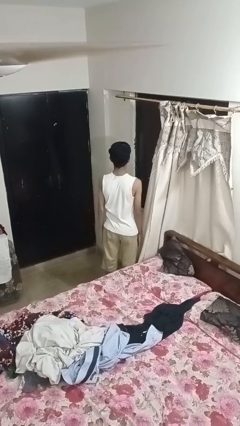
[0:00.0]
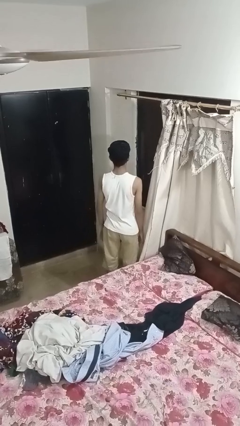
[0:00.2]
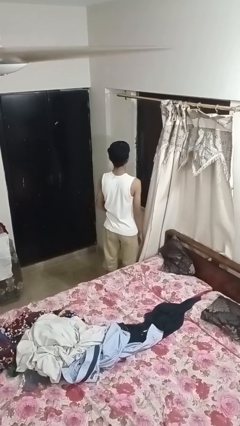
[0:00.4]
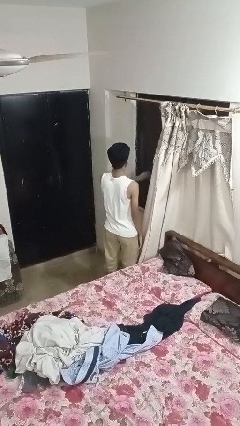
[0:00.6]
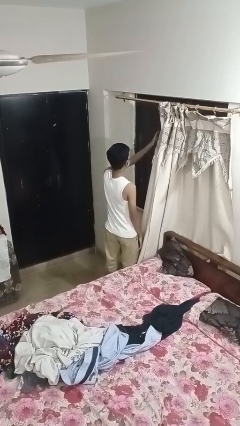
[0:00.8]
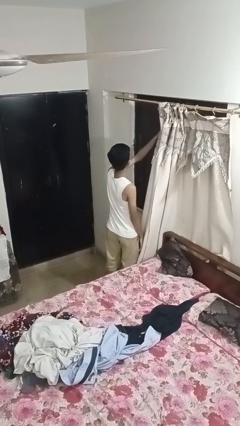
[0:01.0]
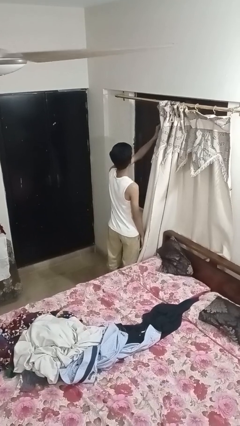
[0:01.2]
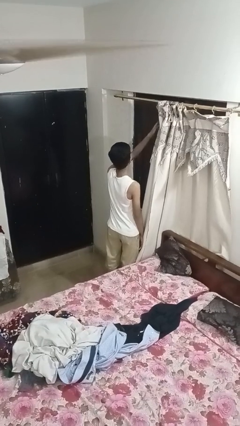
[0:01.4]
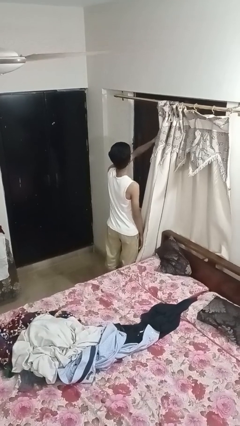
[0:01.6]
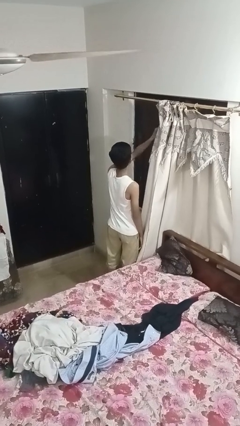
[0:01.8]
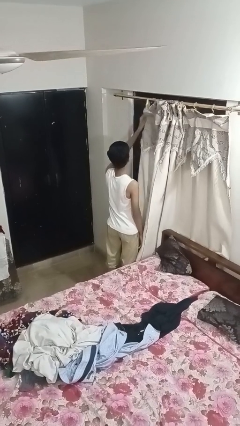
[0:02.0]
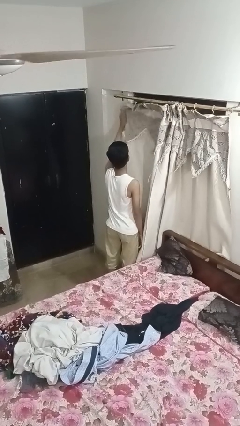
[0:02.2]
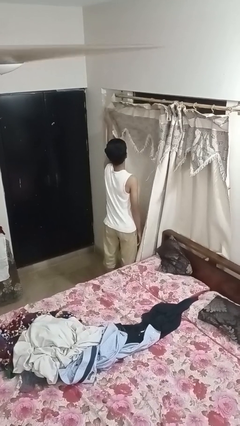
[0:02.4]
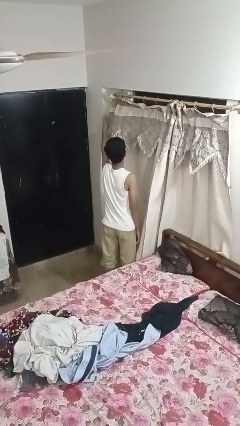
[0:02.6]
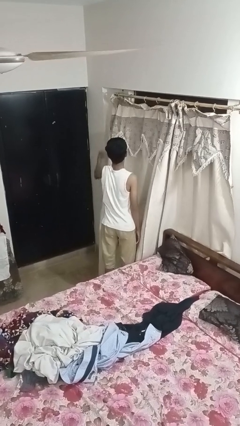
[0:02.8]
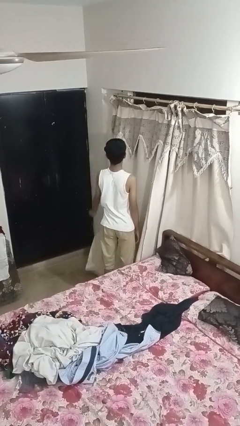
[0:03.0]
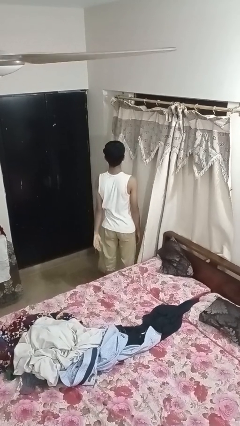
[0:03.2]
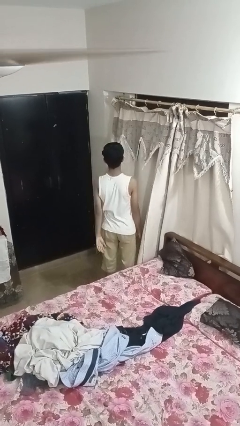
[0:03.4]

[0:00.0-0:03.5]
person closes curtains

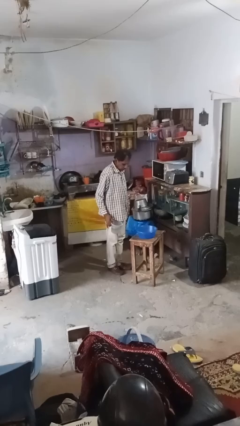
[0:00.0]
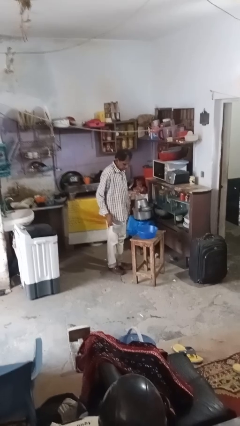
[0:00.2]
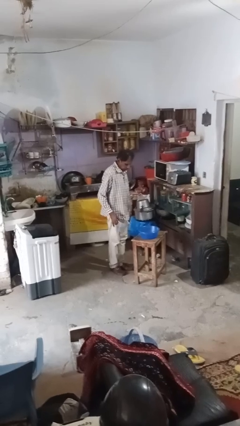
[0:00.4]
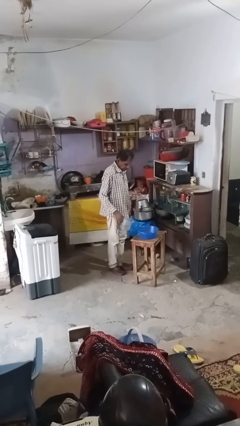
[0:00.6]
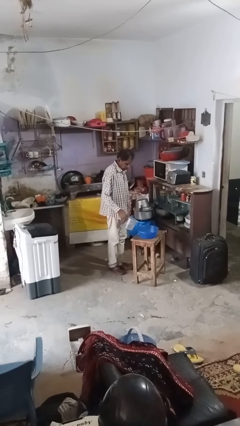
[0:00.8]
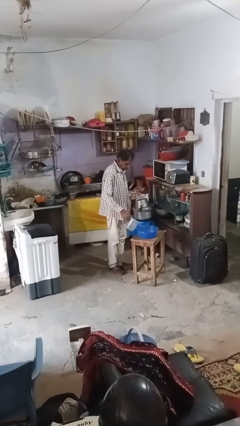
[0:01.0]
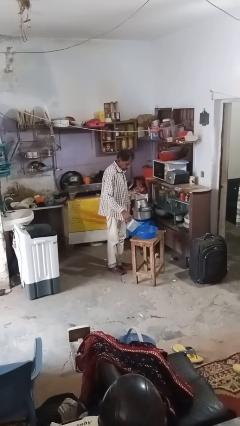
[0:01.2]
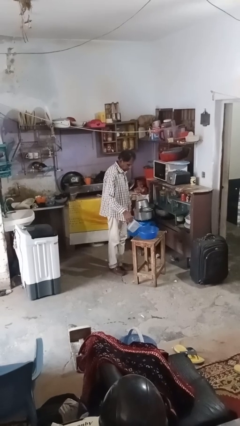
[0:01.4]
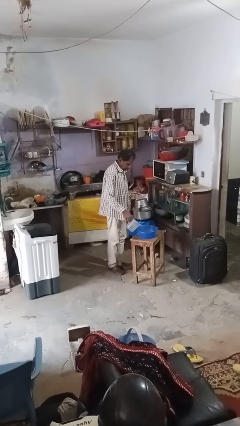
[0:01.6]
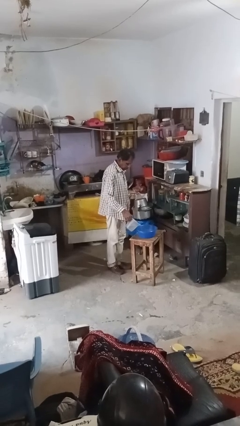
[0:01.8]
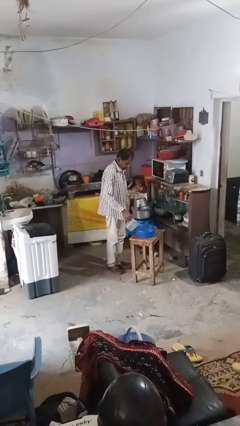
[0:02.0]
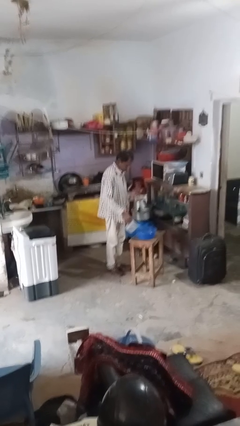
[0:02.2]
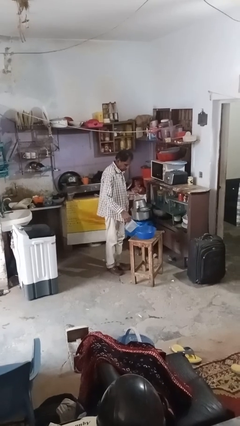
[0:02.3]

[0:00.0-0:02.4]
person pours into bowl

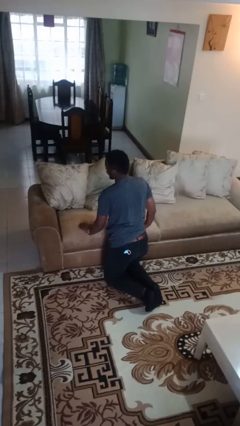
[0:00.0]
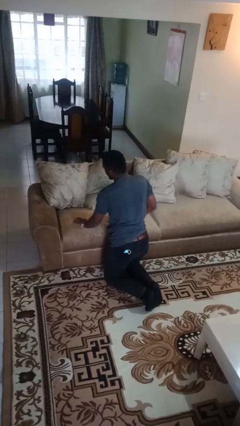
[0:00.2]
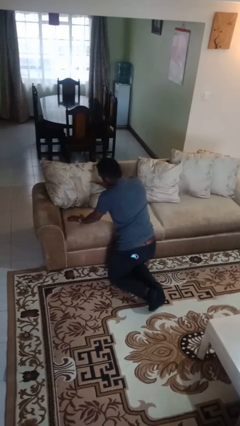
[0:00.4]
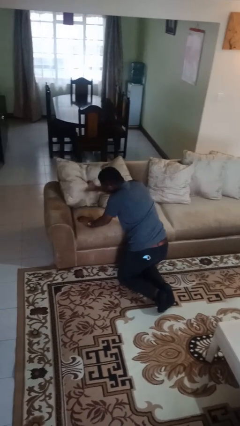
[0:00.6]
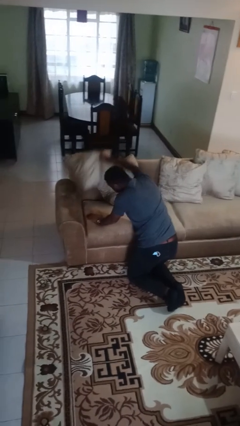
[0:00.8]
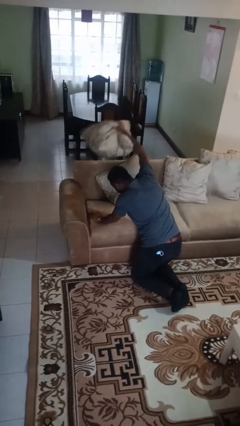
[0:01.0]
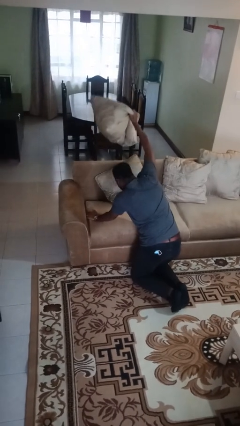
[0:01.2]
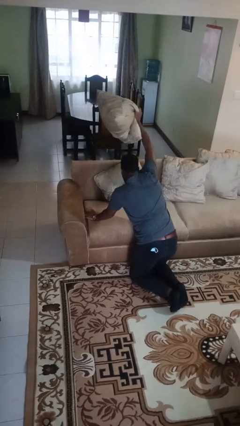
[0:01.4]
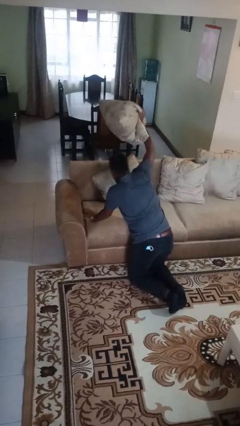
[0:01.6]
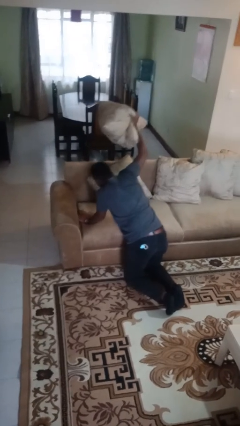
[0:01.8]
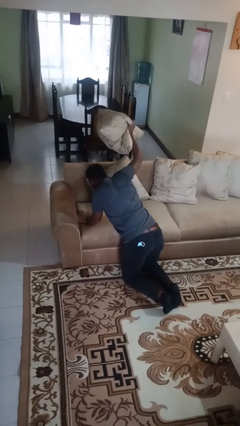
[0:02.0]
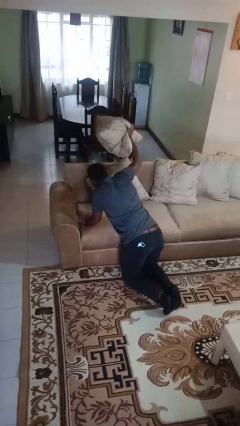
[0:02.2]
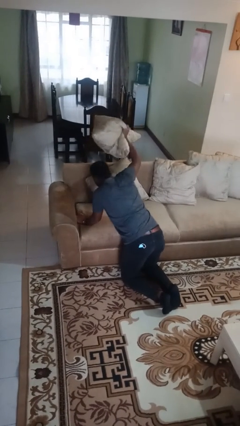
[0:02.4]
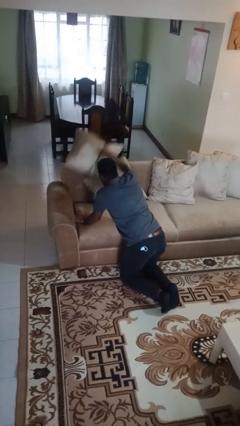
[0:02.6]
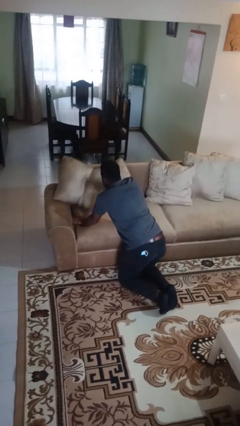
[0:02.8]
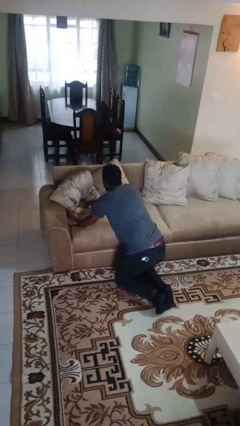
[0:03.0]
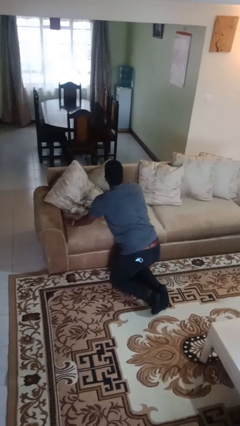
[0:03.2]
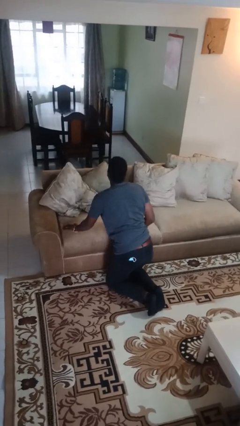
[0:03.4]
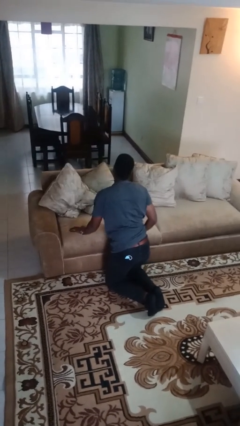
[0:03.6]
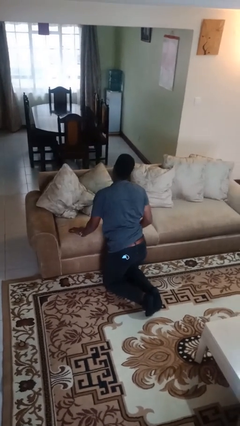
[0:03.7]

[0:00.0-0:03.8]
person searches in couch

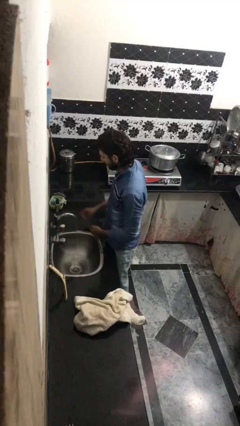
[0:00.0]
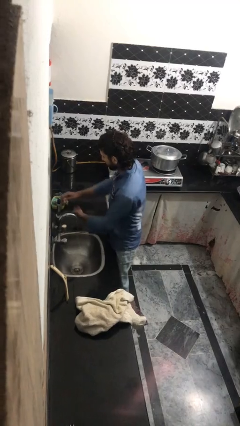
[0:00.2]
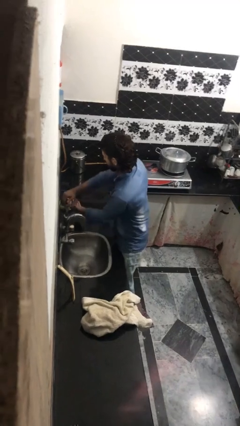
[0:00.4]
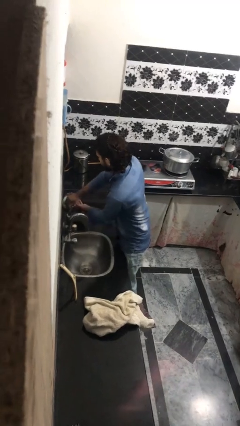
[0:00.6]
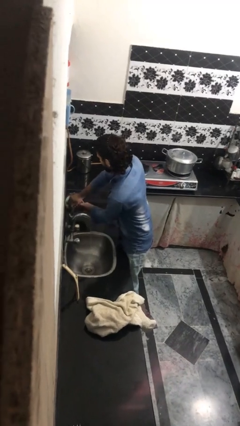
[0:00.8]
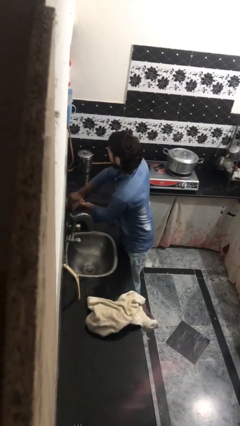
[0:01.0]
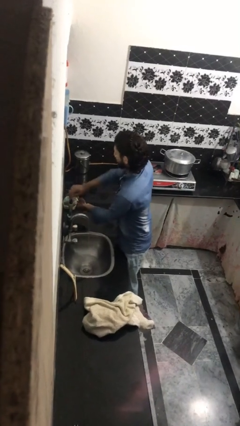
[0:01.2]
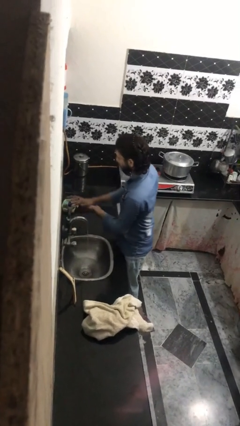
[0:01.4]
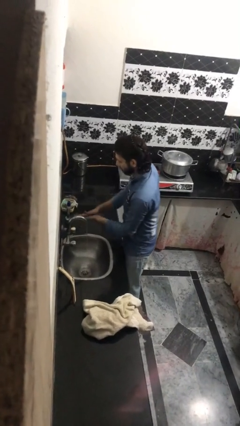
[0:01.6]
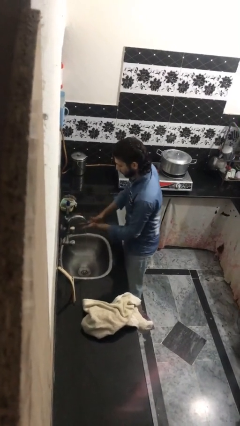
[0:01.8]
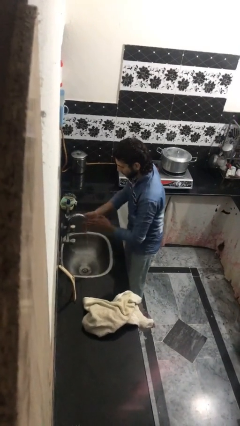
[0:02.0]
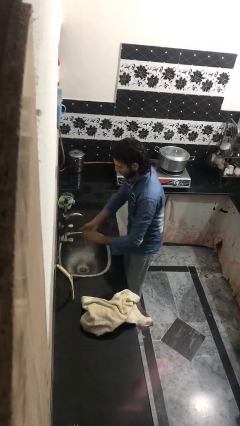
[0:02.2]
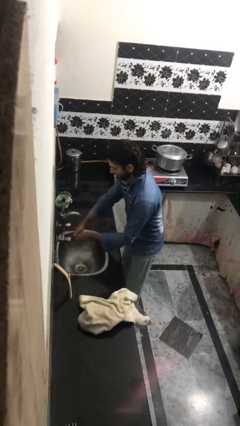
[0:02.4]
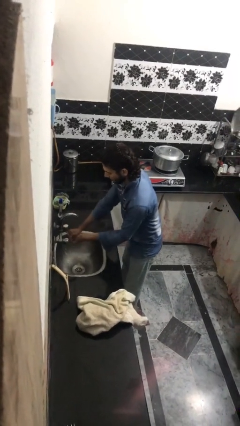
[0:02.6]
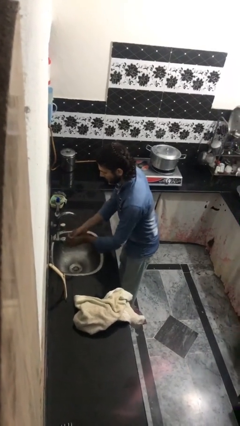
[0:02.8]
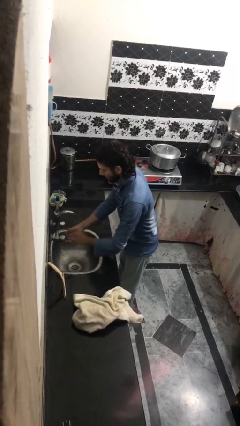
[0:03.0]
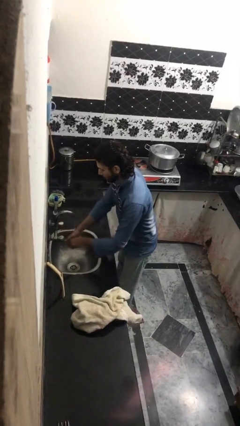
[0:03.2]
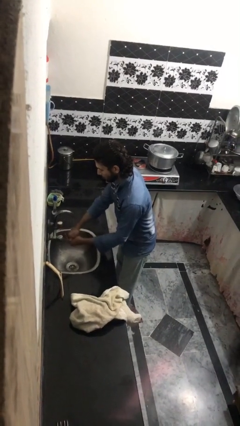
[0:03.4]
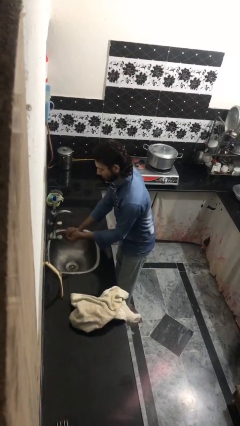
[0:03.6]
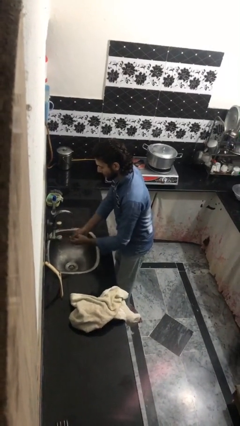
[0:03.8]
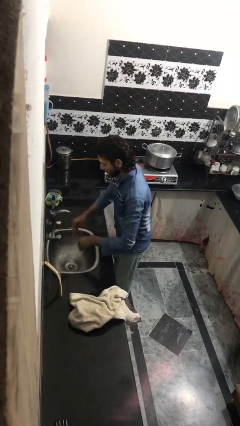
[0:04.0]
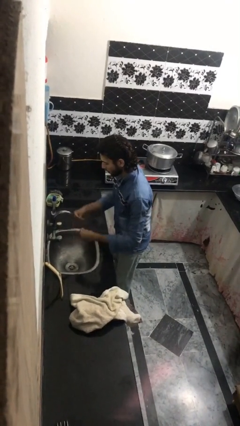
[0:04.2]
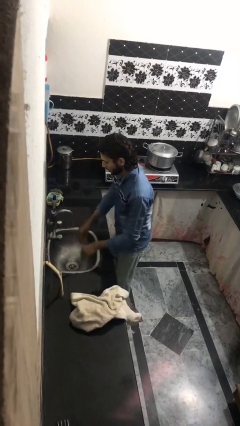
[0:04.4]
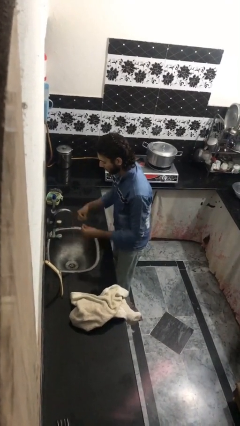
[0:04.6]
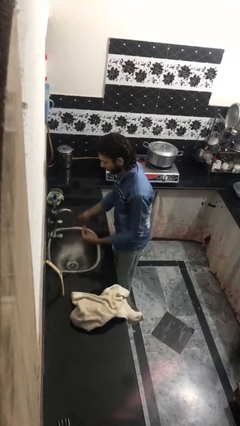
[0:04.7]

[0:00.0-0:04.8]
person washes hands

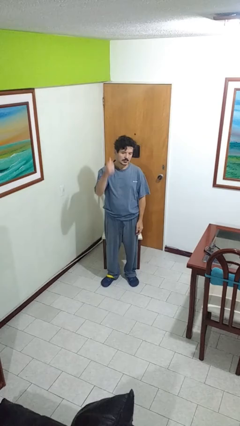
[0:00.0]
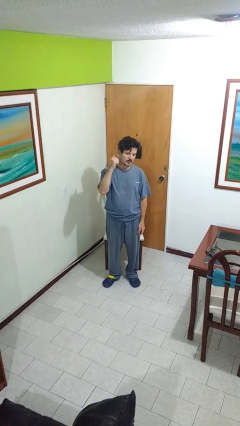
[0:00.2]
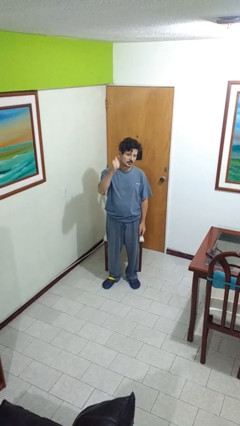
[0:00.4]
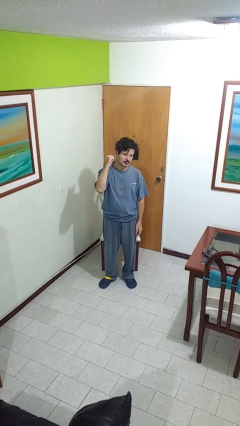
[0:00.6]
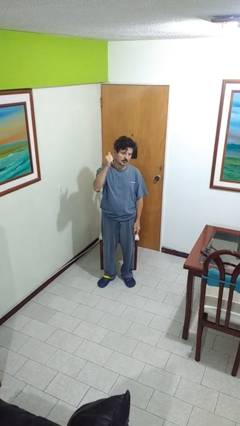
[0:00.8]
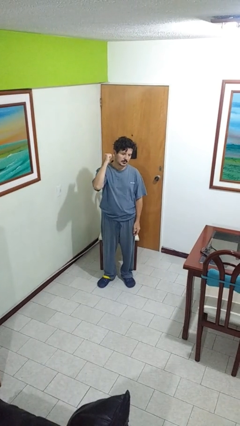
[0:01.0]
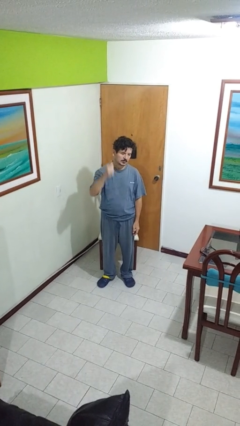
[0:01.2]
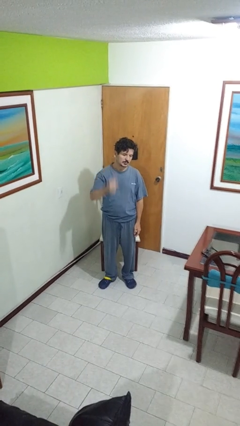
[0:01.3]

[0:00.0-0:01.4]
person gestures behind me

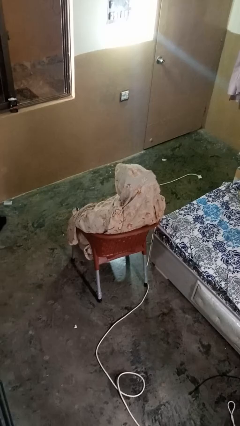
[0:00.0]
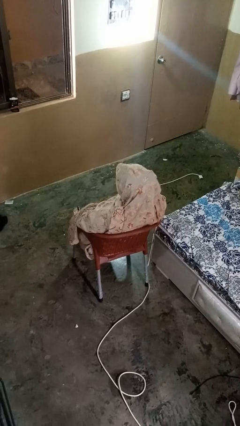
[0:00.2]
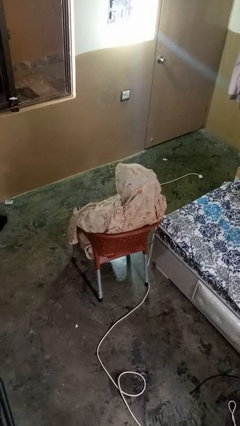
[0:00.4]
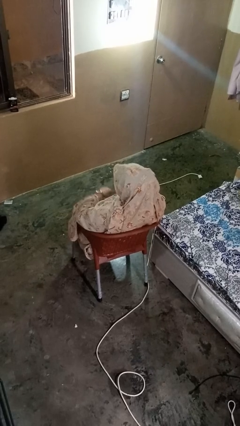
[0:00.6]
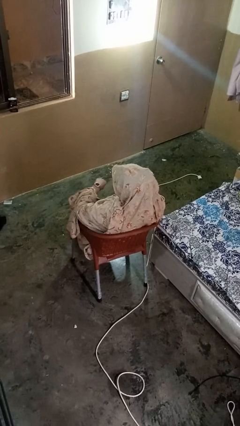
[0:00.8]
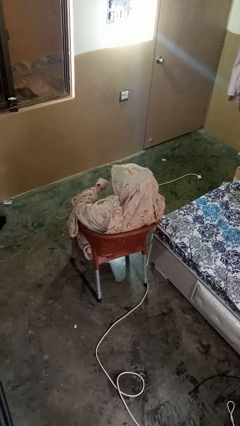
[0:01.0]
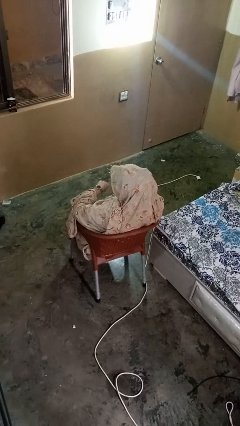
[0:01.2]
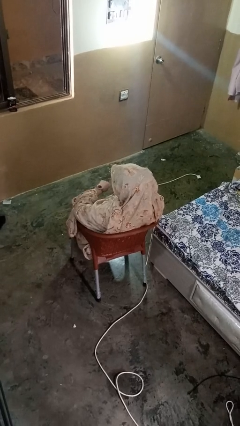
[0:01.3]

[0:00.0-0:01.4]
person looks at wristwatch

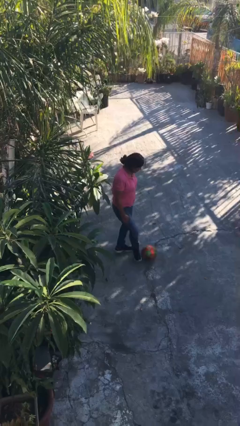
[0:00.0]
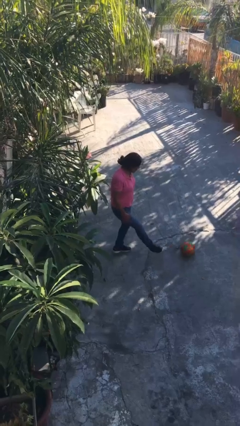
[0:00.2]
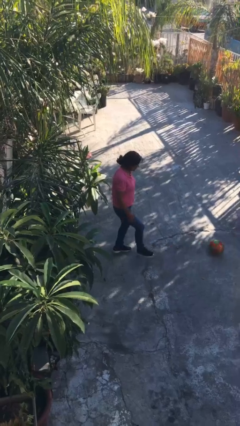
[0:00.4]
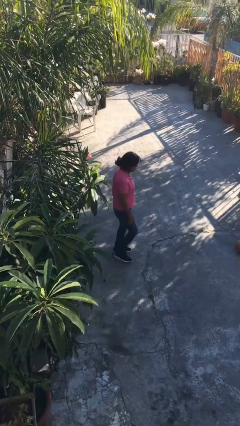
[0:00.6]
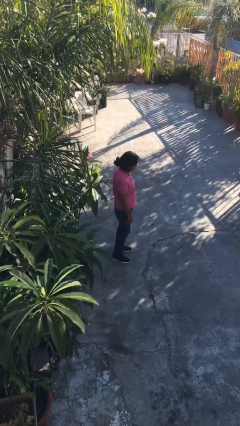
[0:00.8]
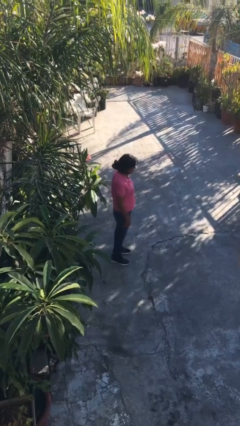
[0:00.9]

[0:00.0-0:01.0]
person kicks object to person
